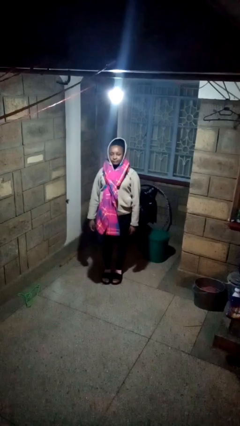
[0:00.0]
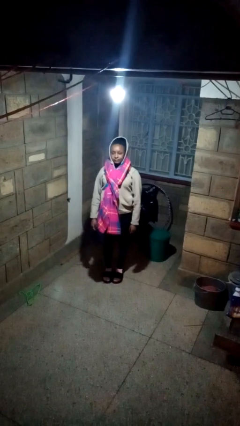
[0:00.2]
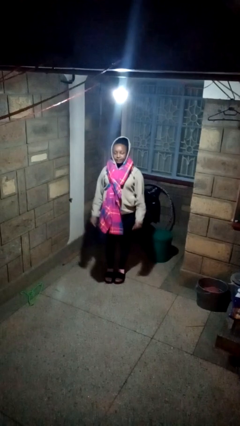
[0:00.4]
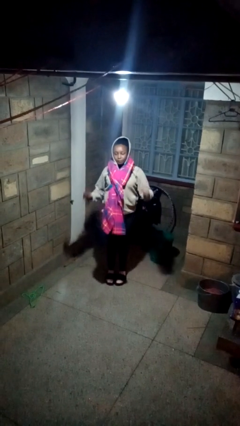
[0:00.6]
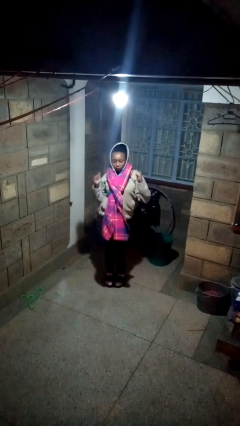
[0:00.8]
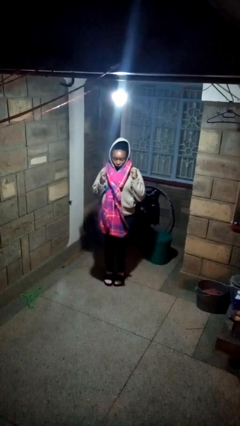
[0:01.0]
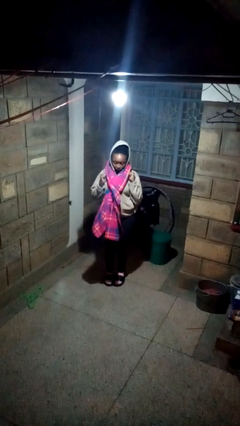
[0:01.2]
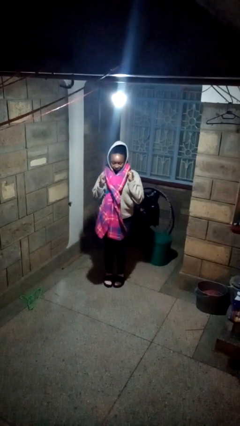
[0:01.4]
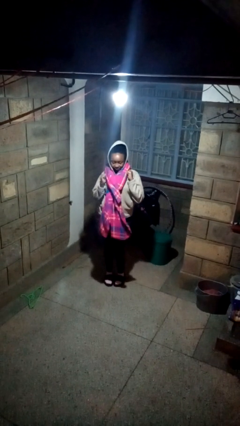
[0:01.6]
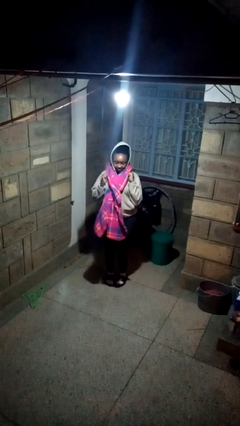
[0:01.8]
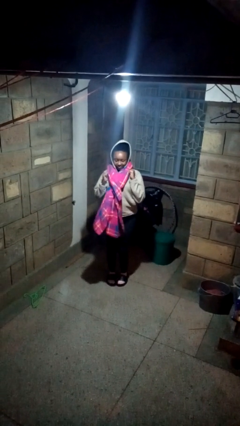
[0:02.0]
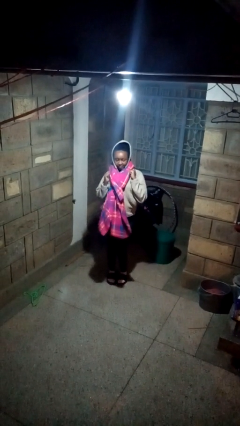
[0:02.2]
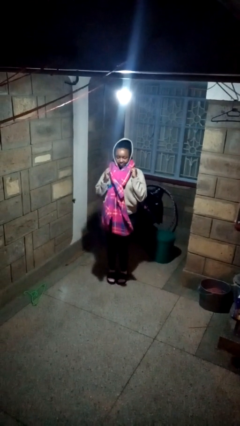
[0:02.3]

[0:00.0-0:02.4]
person wiggles hips

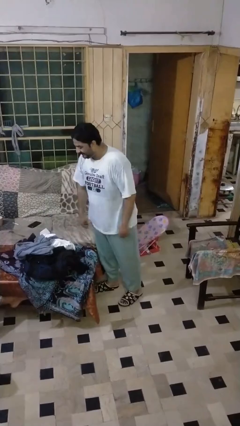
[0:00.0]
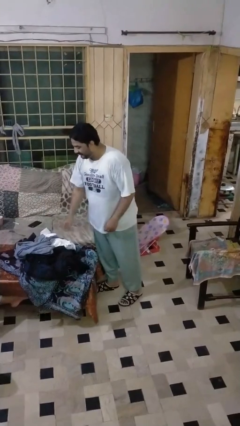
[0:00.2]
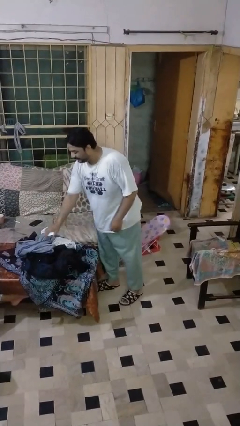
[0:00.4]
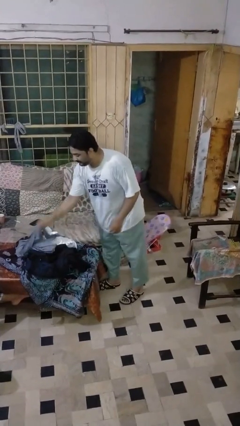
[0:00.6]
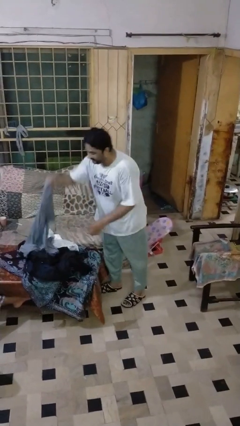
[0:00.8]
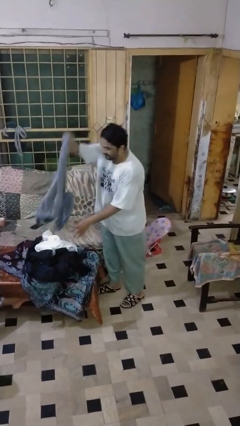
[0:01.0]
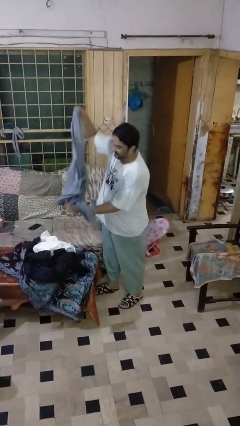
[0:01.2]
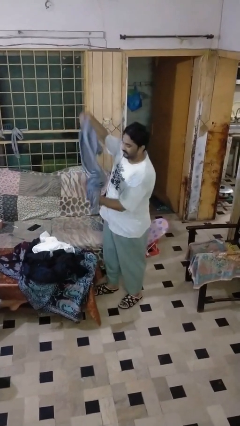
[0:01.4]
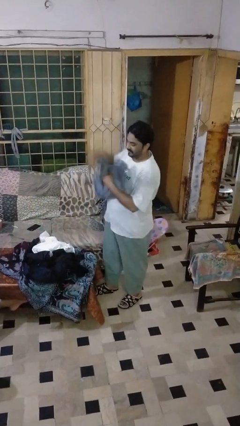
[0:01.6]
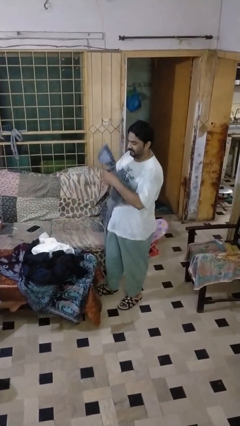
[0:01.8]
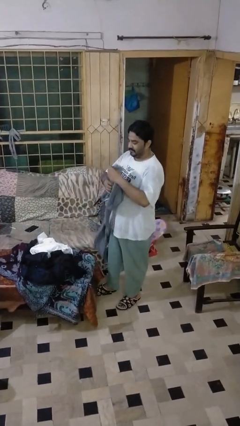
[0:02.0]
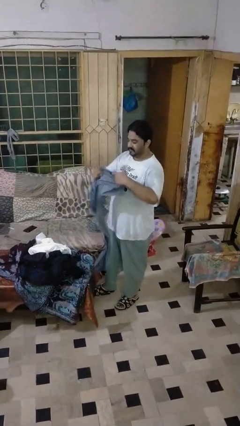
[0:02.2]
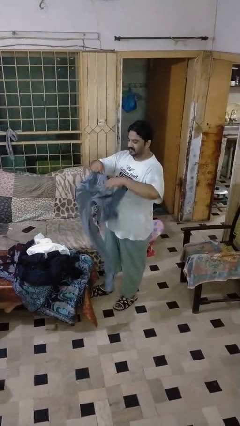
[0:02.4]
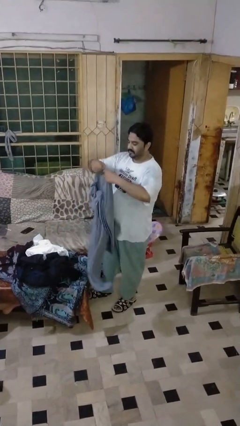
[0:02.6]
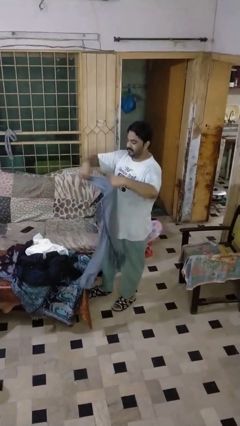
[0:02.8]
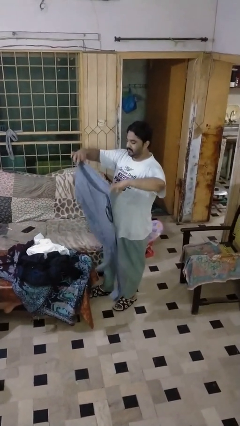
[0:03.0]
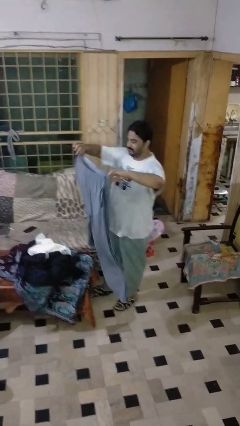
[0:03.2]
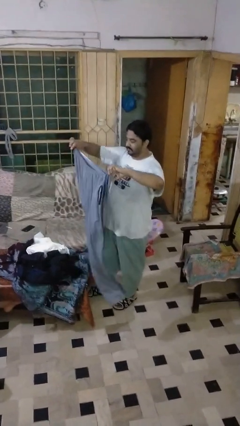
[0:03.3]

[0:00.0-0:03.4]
person folds pants

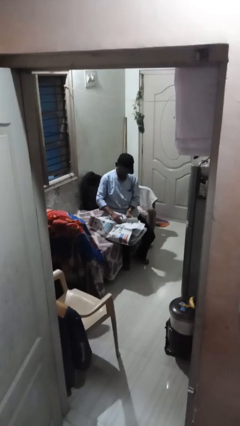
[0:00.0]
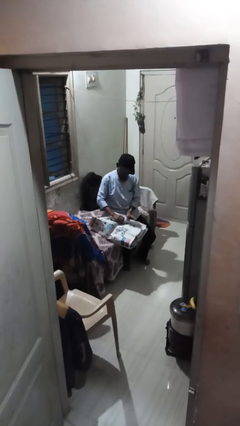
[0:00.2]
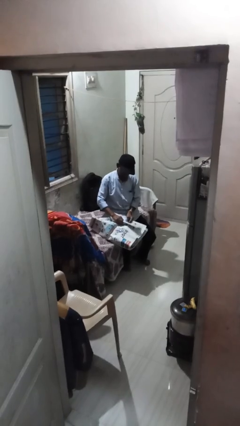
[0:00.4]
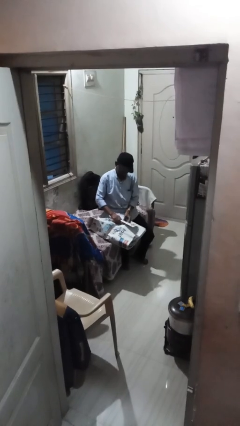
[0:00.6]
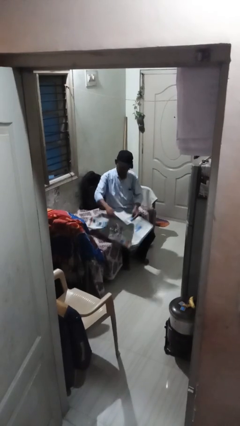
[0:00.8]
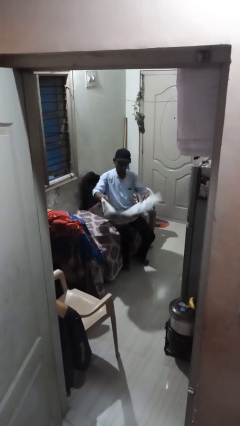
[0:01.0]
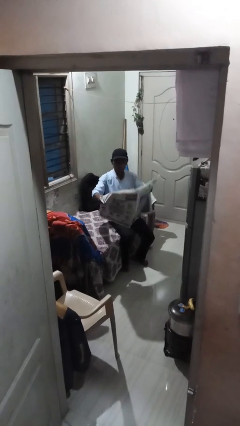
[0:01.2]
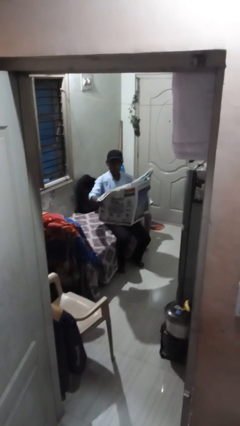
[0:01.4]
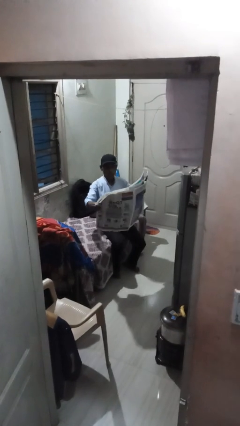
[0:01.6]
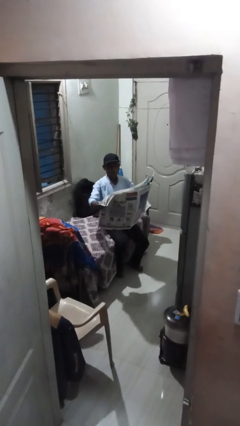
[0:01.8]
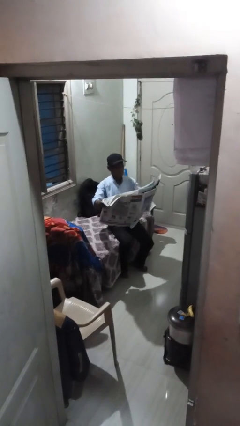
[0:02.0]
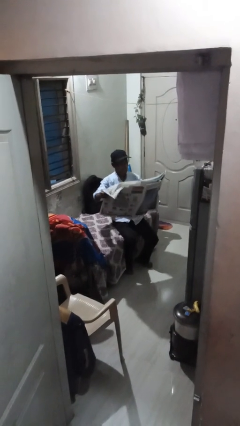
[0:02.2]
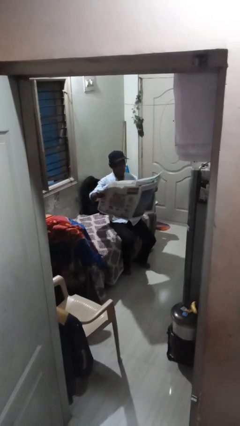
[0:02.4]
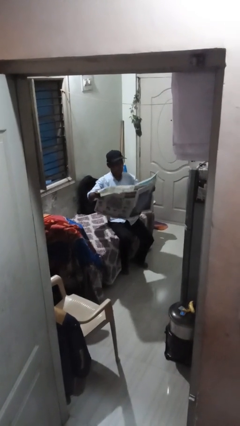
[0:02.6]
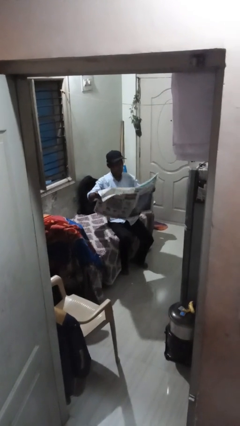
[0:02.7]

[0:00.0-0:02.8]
person reads newspaper

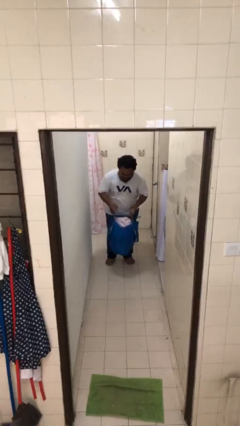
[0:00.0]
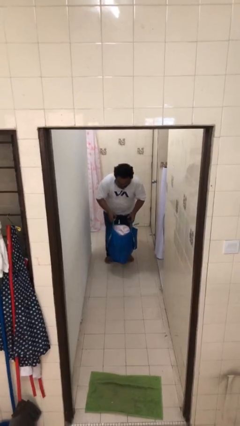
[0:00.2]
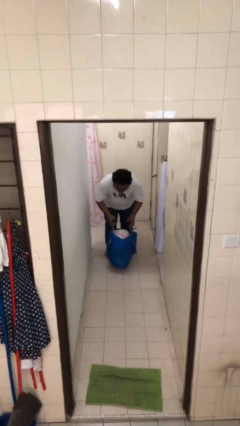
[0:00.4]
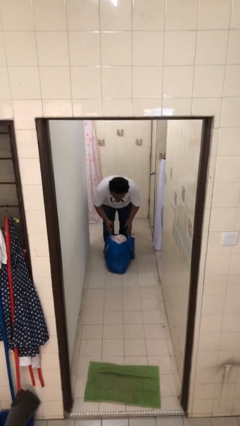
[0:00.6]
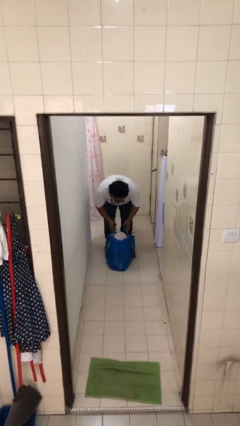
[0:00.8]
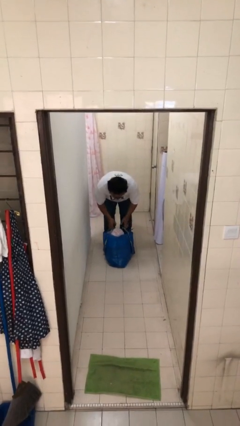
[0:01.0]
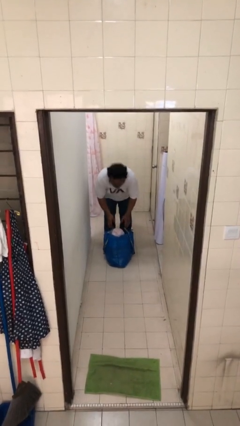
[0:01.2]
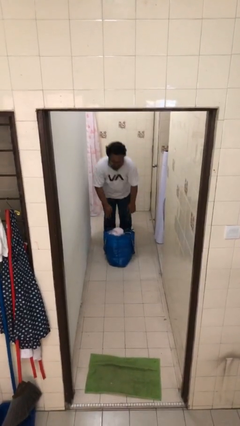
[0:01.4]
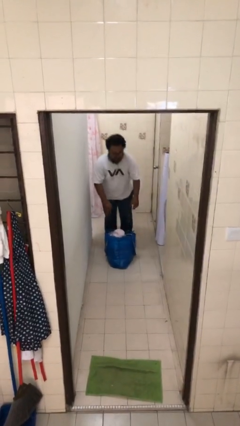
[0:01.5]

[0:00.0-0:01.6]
person puts down object on floor

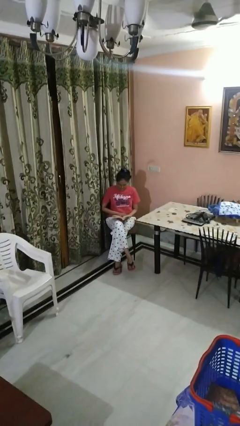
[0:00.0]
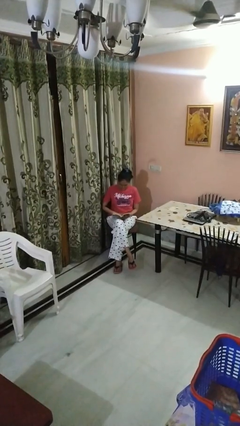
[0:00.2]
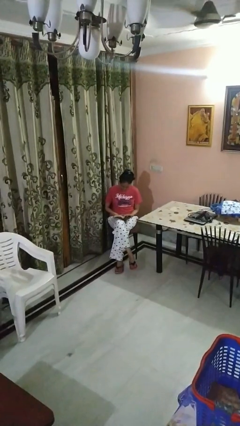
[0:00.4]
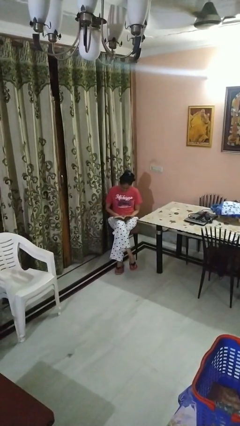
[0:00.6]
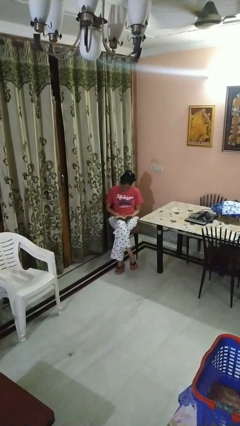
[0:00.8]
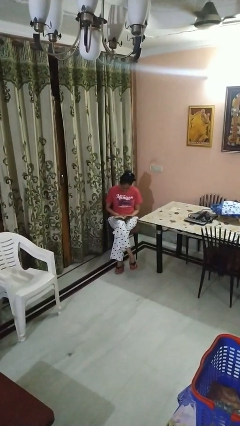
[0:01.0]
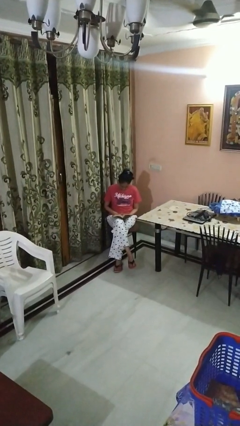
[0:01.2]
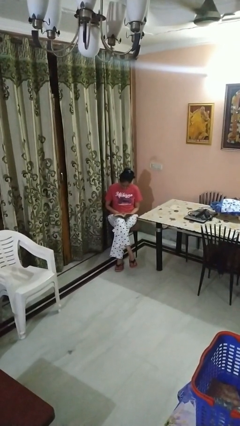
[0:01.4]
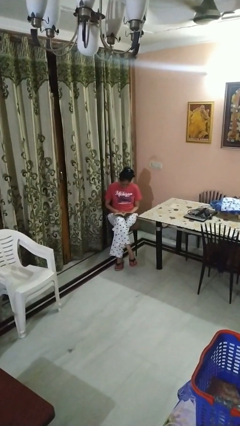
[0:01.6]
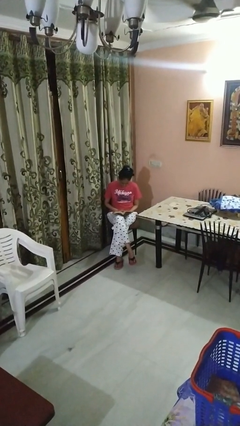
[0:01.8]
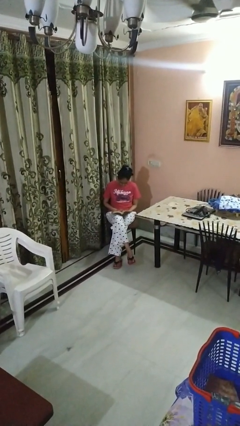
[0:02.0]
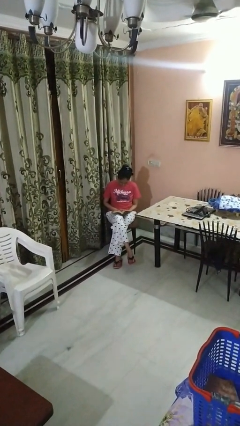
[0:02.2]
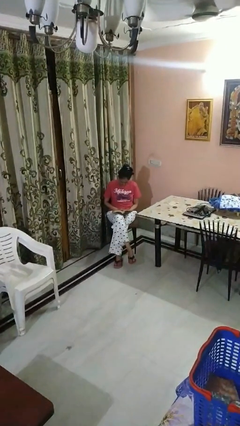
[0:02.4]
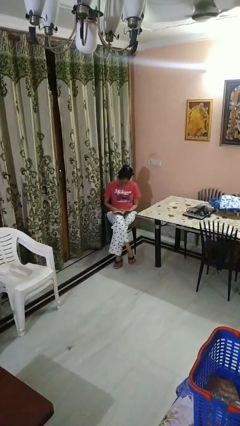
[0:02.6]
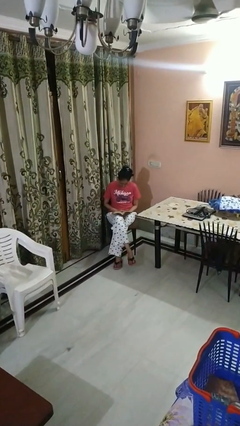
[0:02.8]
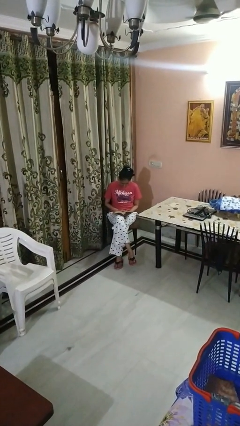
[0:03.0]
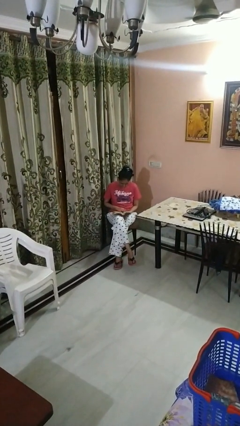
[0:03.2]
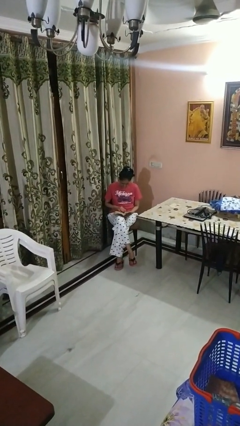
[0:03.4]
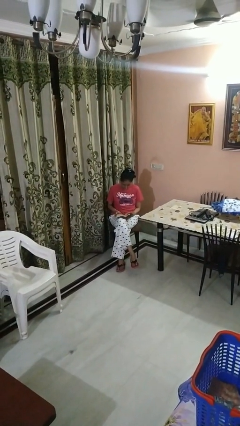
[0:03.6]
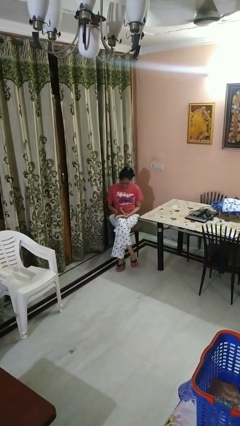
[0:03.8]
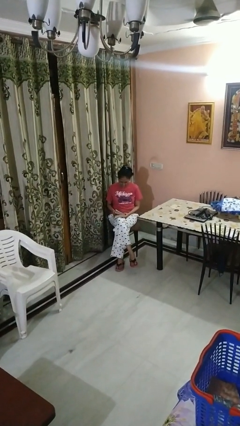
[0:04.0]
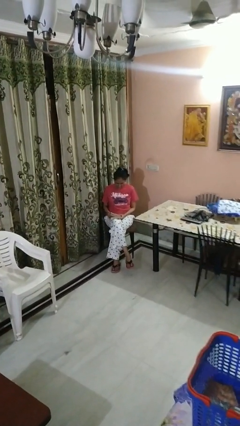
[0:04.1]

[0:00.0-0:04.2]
person reads book

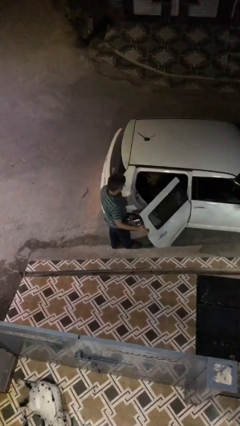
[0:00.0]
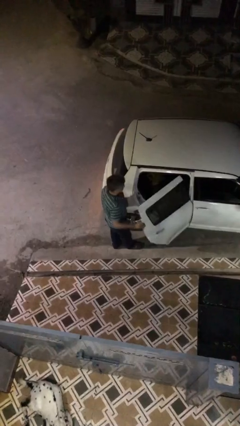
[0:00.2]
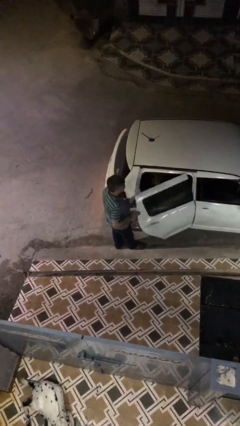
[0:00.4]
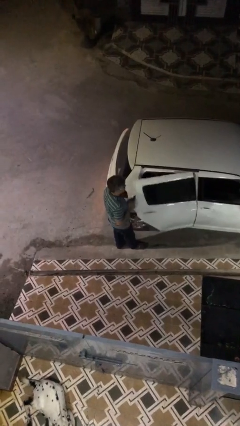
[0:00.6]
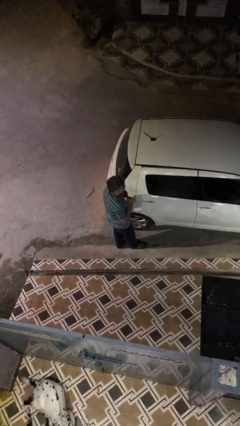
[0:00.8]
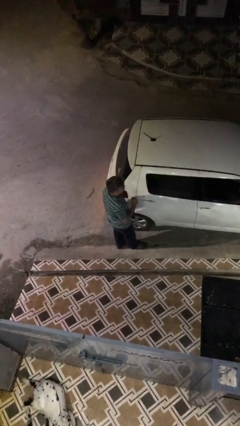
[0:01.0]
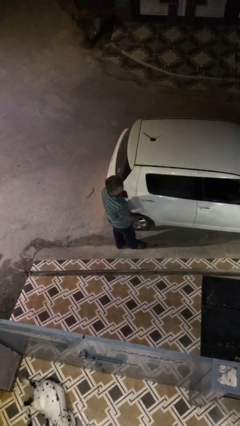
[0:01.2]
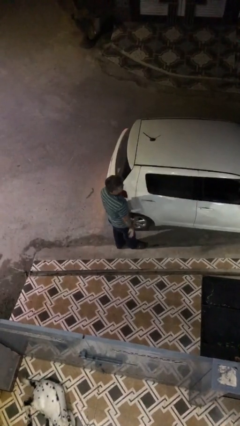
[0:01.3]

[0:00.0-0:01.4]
person closes car door

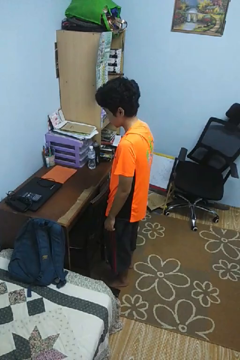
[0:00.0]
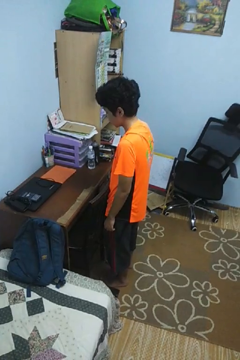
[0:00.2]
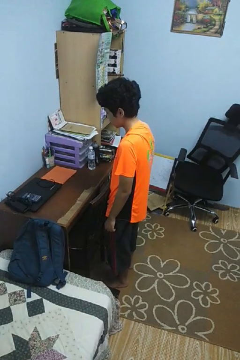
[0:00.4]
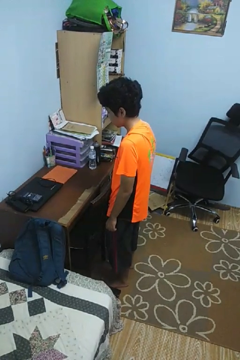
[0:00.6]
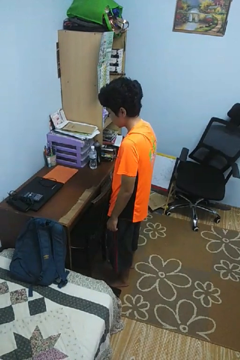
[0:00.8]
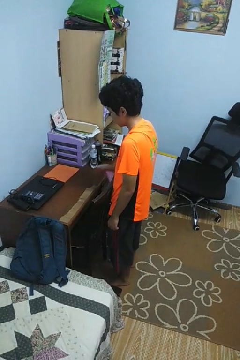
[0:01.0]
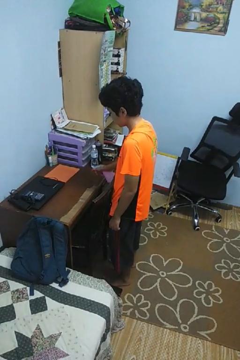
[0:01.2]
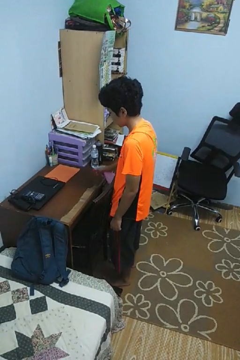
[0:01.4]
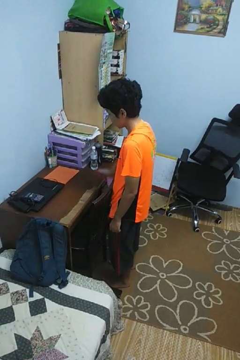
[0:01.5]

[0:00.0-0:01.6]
person sprays from bottle
